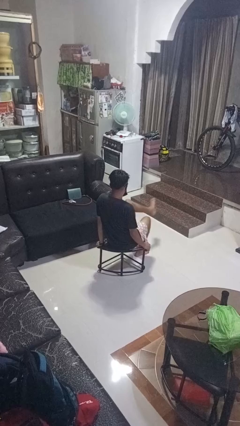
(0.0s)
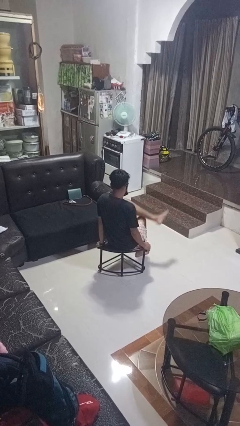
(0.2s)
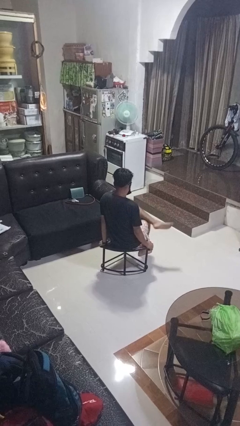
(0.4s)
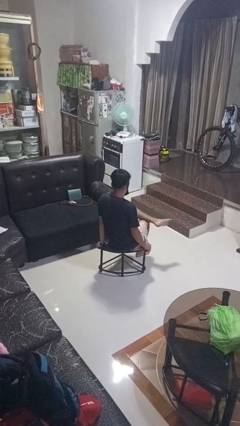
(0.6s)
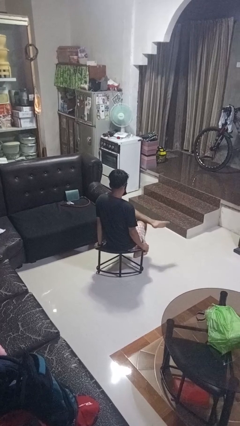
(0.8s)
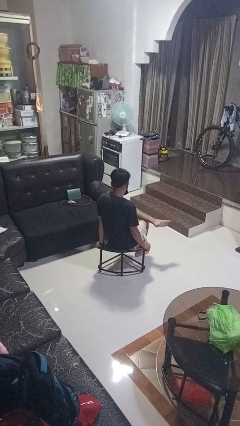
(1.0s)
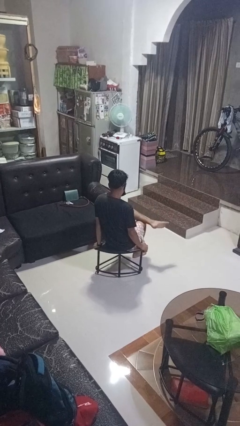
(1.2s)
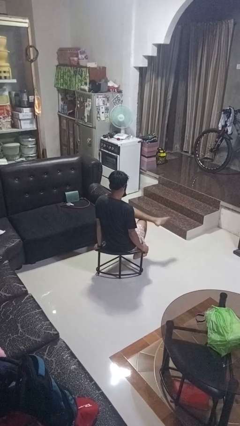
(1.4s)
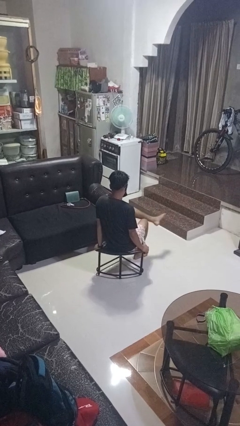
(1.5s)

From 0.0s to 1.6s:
person crosses legs

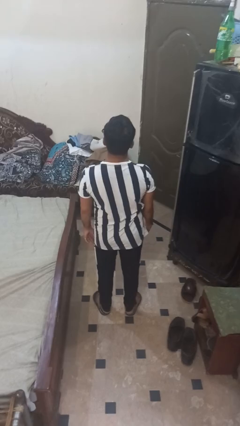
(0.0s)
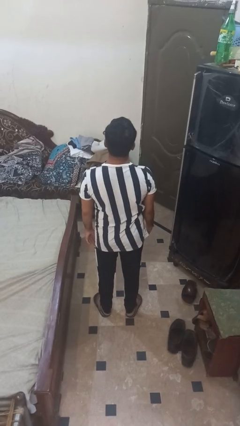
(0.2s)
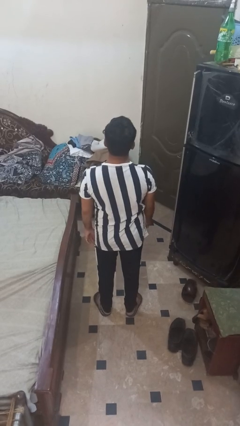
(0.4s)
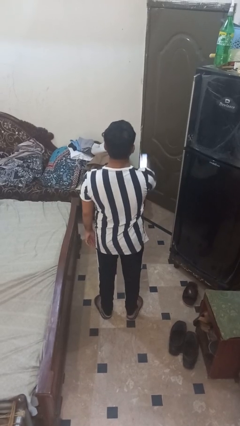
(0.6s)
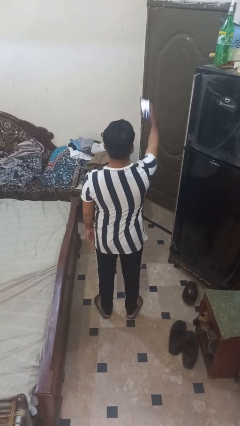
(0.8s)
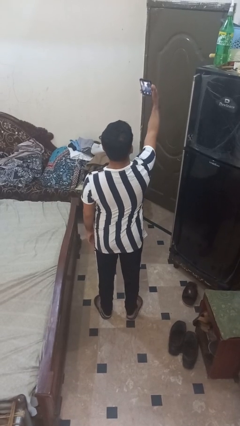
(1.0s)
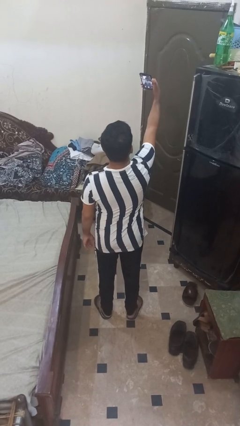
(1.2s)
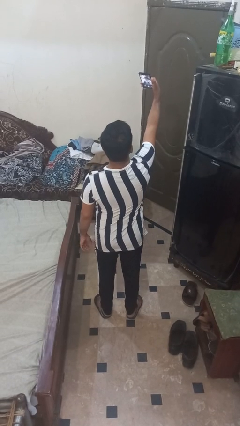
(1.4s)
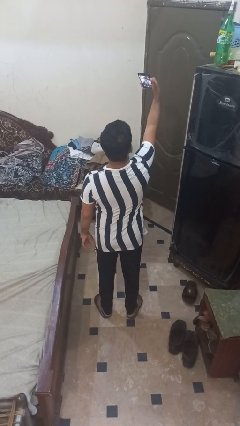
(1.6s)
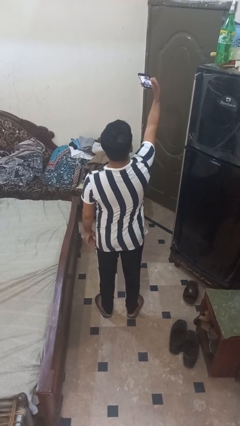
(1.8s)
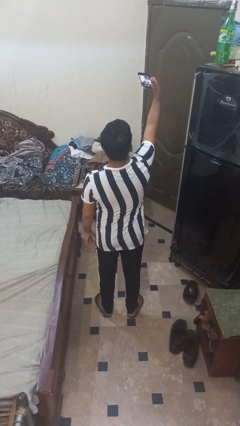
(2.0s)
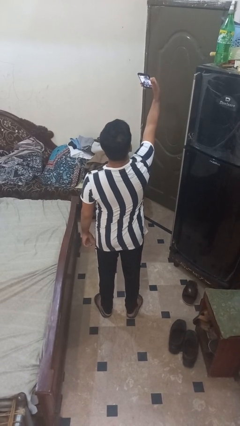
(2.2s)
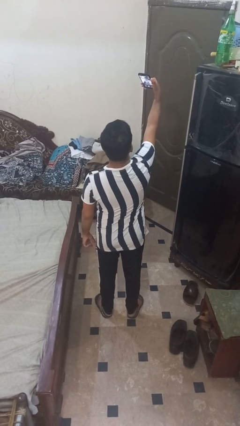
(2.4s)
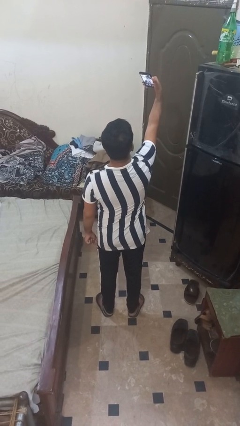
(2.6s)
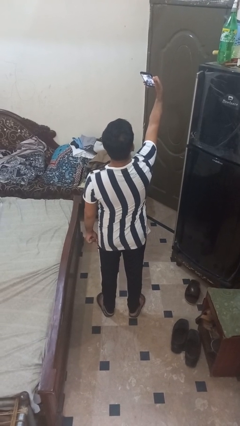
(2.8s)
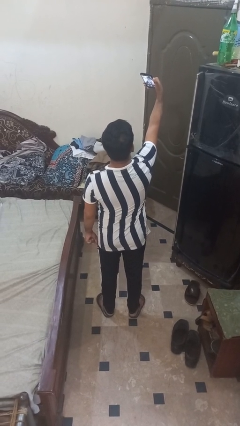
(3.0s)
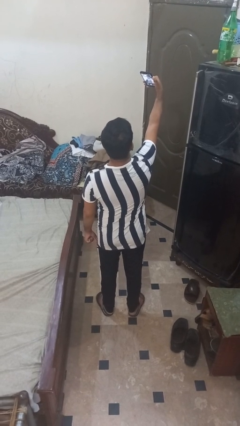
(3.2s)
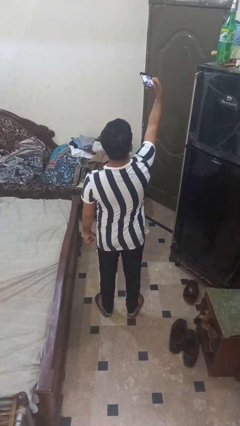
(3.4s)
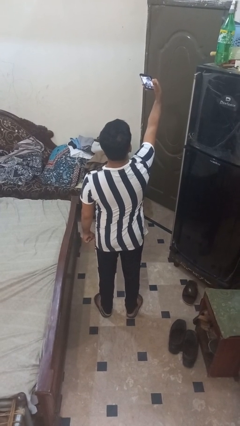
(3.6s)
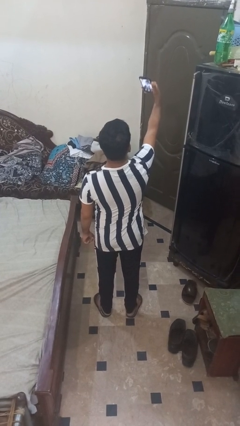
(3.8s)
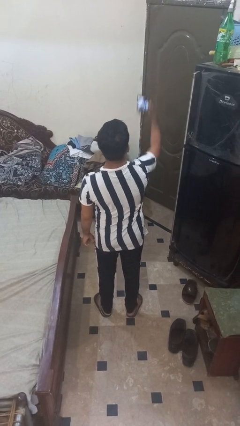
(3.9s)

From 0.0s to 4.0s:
person takes selfie

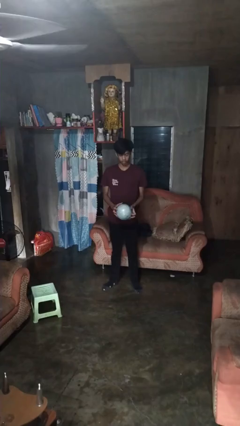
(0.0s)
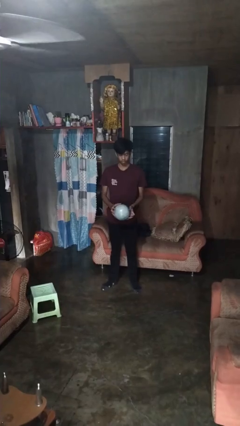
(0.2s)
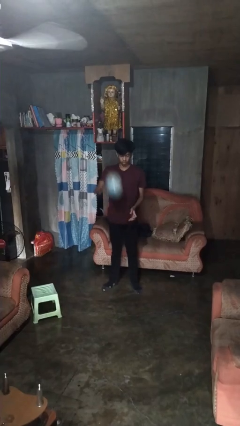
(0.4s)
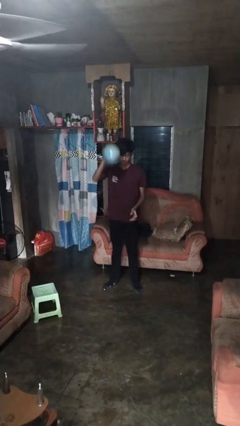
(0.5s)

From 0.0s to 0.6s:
person bounces ball on floor

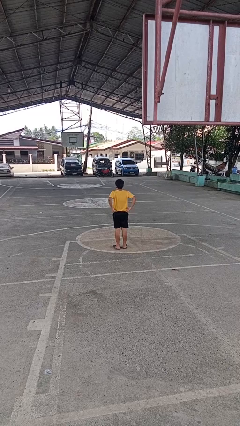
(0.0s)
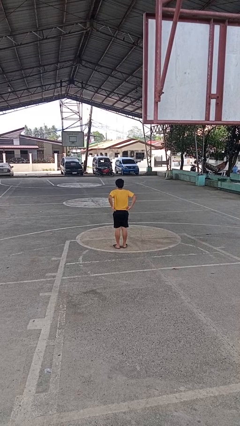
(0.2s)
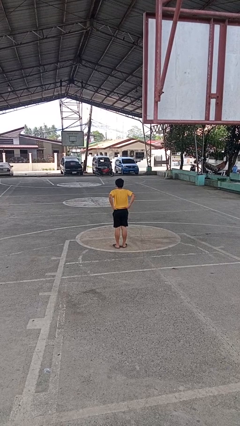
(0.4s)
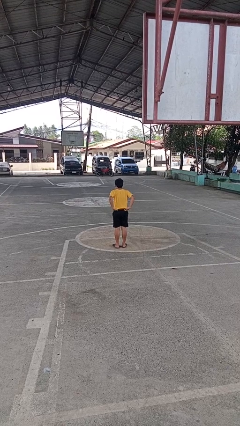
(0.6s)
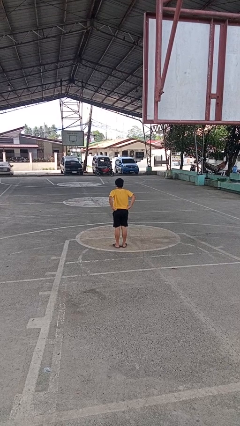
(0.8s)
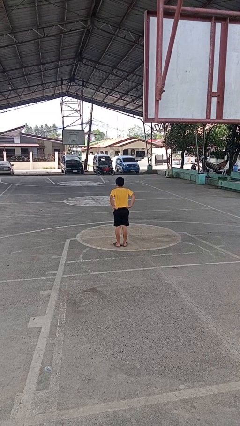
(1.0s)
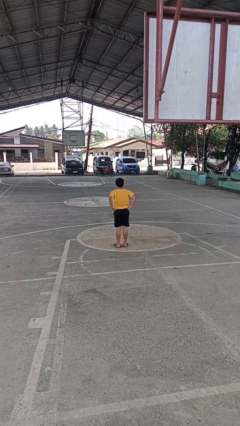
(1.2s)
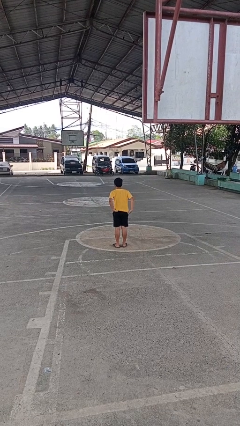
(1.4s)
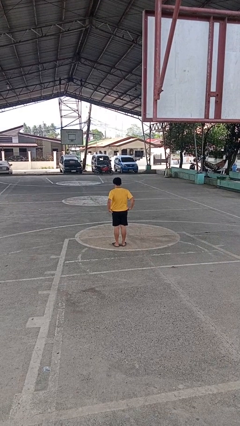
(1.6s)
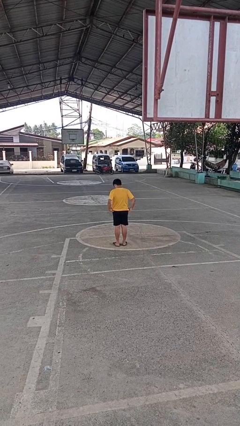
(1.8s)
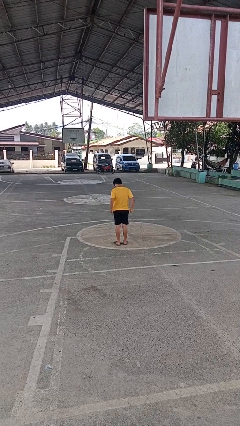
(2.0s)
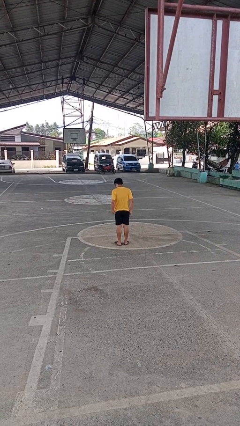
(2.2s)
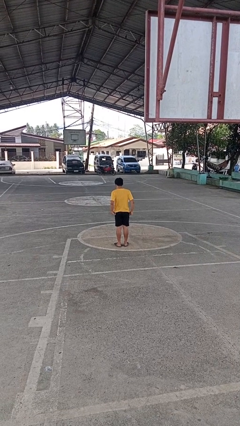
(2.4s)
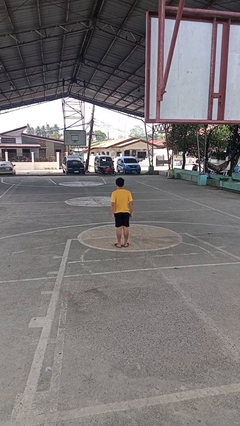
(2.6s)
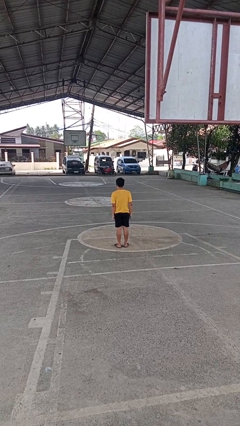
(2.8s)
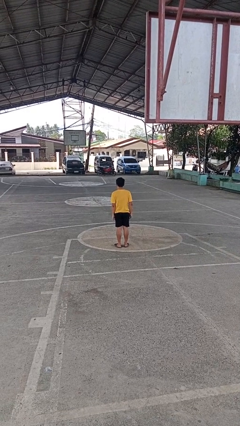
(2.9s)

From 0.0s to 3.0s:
person untucks shirt

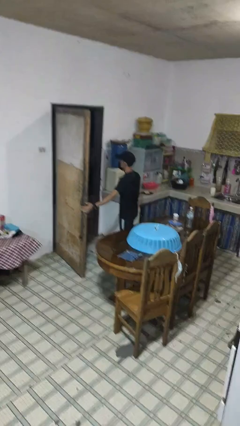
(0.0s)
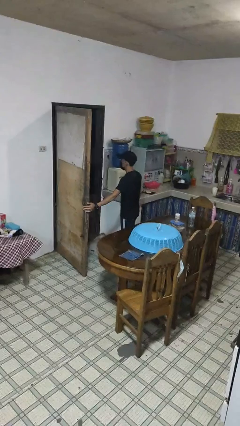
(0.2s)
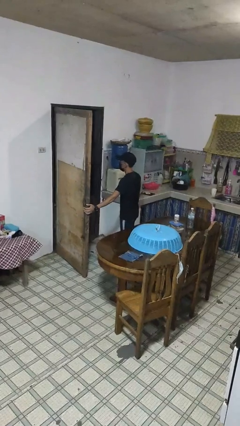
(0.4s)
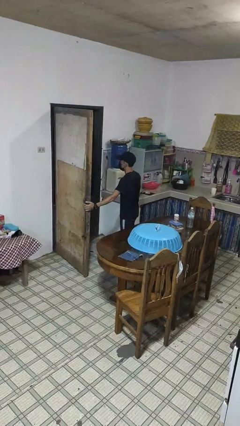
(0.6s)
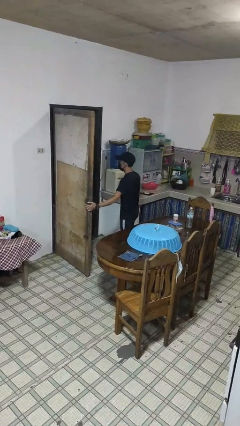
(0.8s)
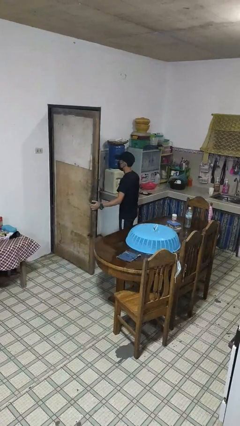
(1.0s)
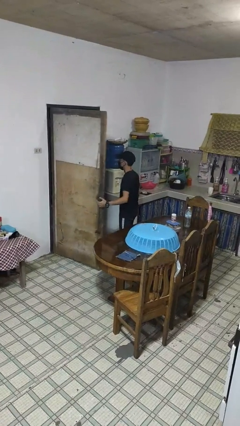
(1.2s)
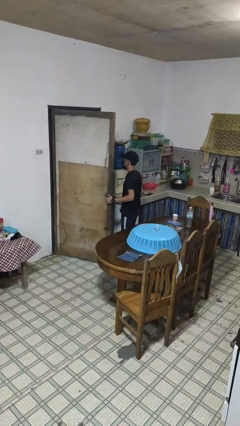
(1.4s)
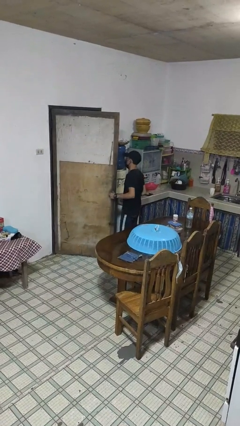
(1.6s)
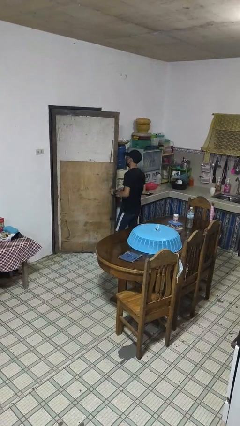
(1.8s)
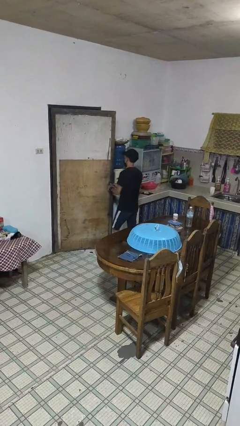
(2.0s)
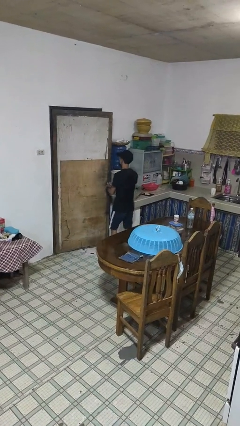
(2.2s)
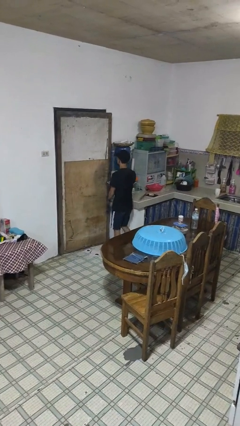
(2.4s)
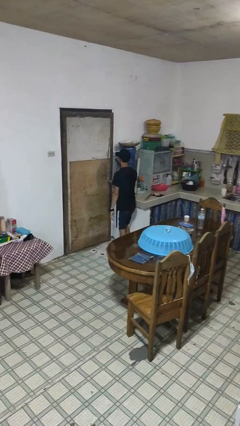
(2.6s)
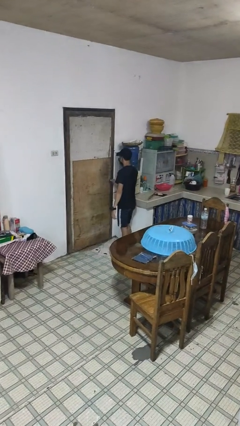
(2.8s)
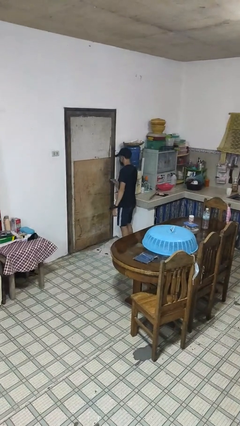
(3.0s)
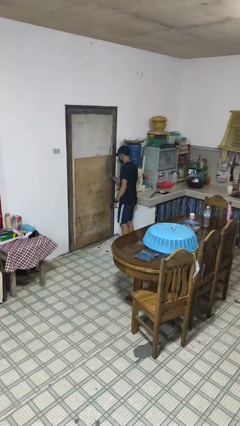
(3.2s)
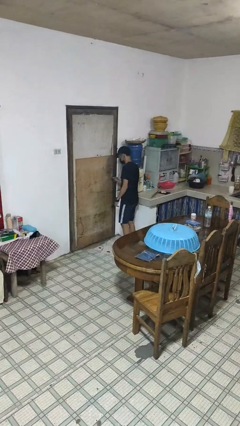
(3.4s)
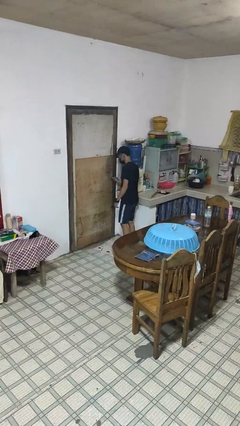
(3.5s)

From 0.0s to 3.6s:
person closes facility door

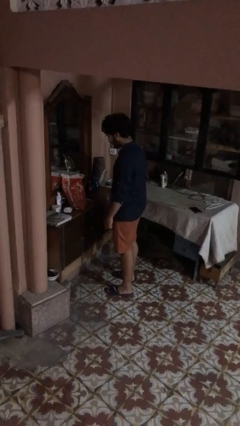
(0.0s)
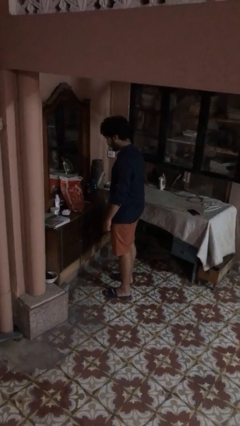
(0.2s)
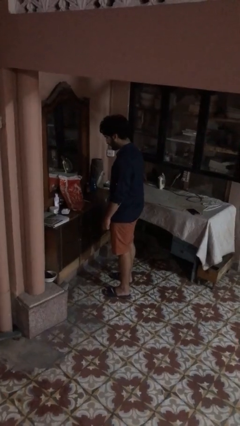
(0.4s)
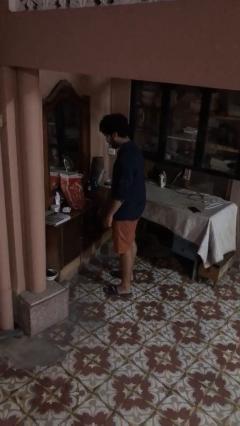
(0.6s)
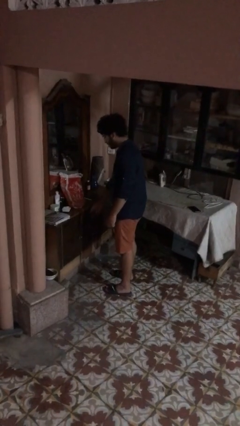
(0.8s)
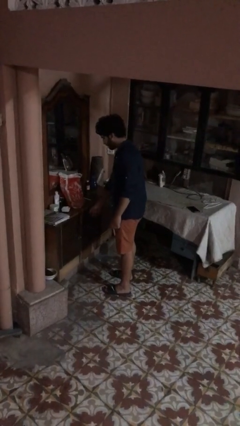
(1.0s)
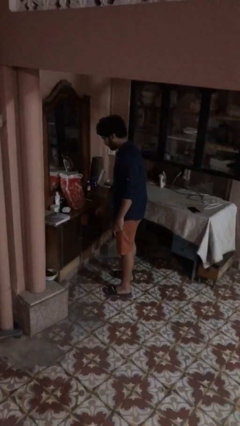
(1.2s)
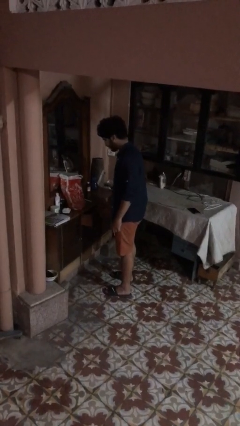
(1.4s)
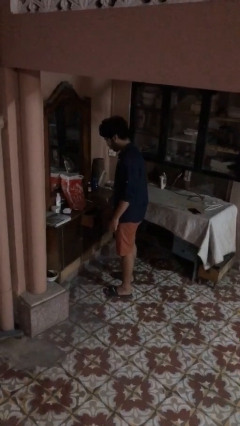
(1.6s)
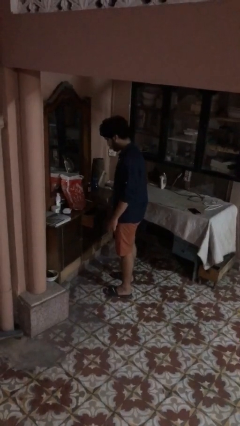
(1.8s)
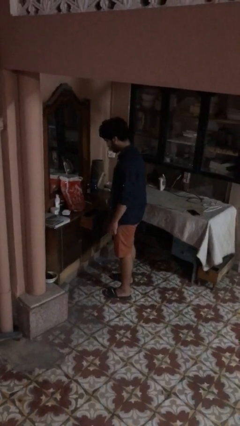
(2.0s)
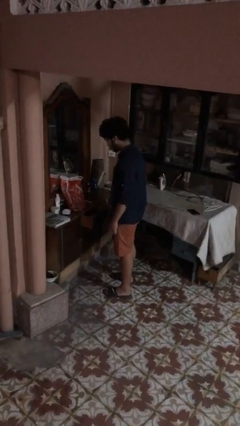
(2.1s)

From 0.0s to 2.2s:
person opens dresser drawer

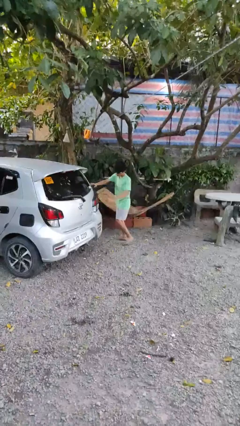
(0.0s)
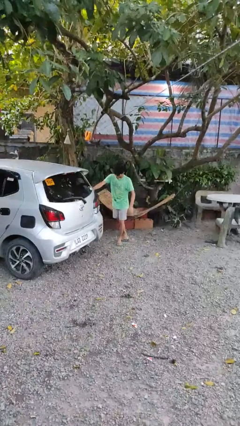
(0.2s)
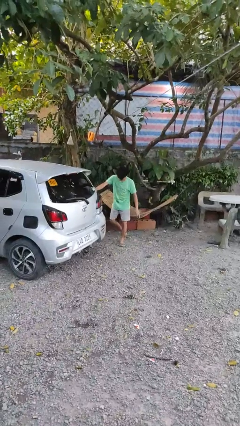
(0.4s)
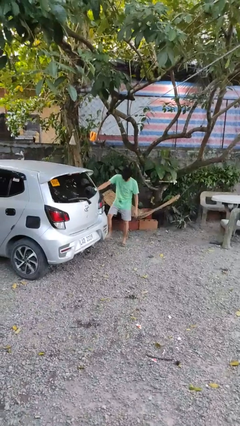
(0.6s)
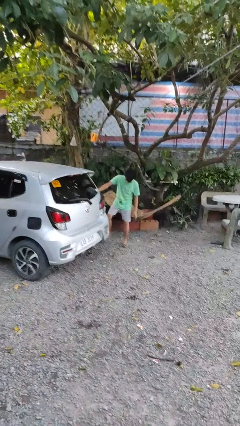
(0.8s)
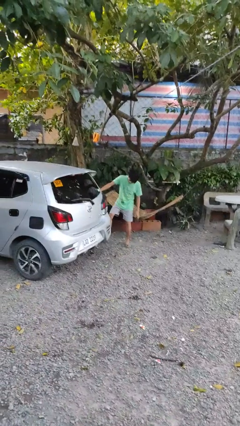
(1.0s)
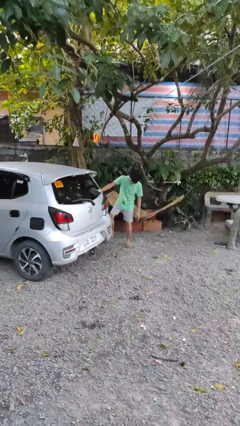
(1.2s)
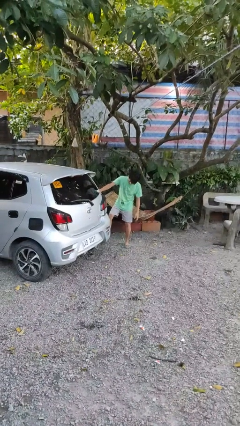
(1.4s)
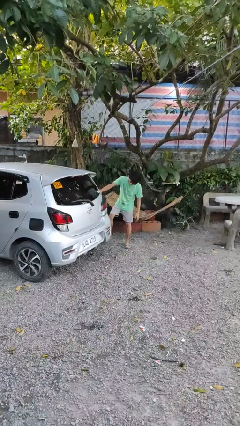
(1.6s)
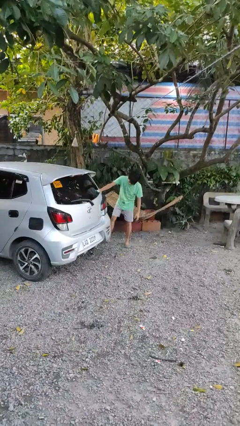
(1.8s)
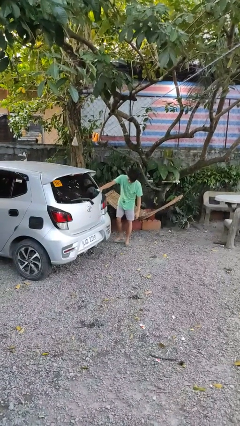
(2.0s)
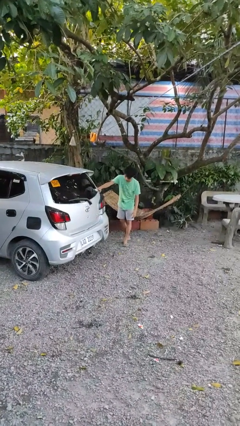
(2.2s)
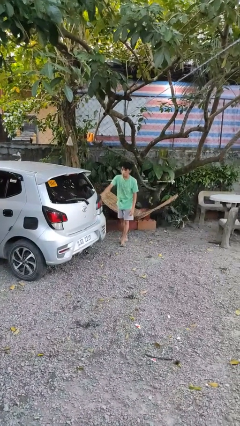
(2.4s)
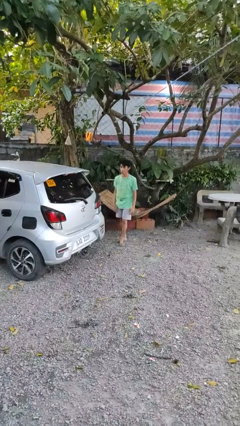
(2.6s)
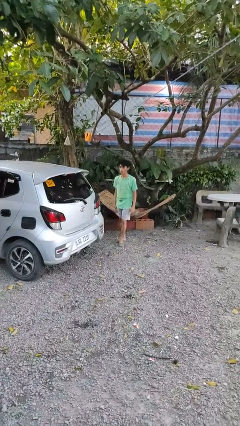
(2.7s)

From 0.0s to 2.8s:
person kicks car tires
